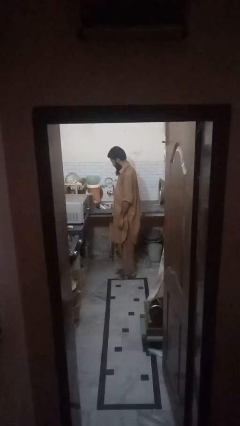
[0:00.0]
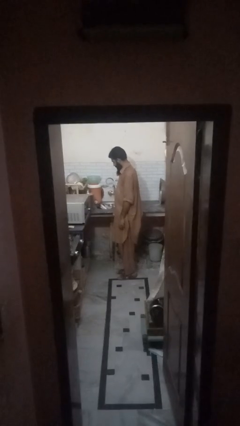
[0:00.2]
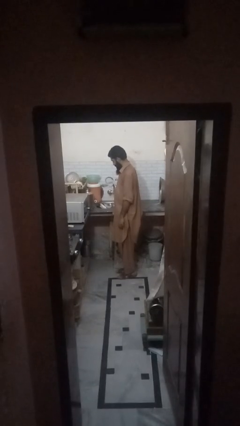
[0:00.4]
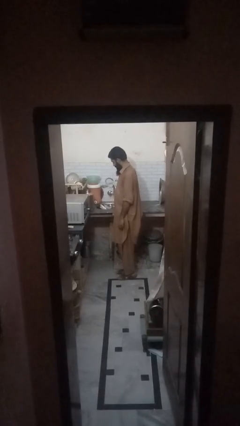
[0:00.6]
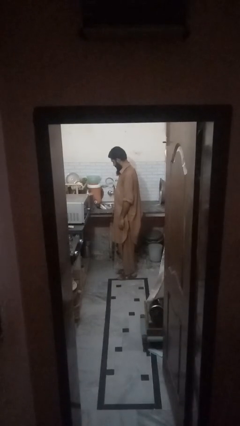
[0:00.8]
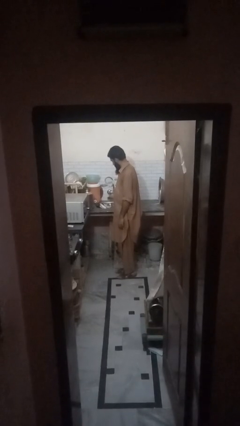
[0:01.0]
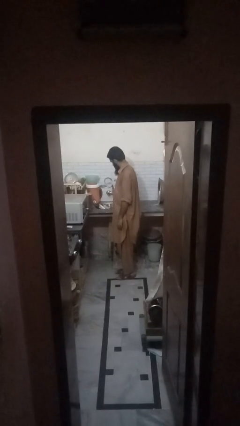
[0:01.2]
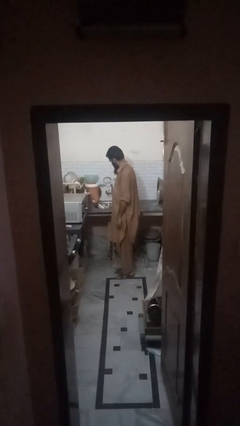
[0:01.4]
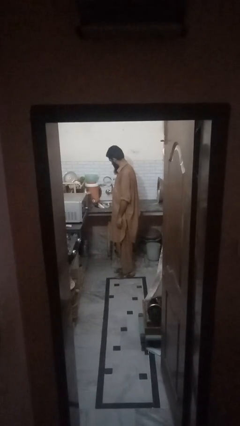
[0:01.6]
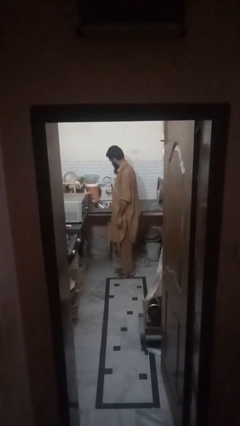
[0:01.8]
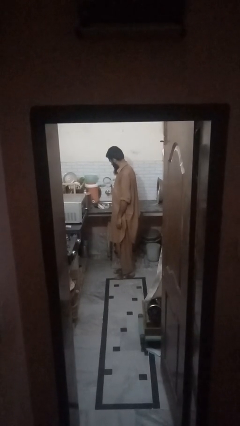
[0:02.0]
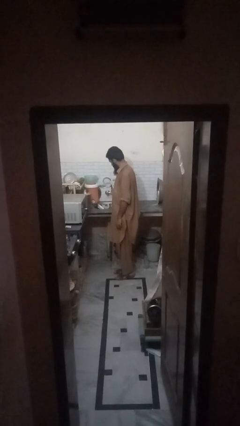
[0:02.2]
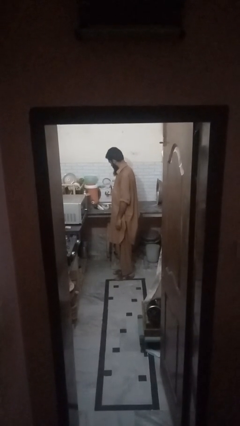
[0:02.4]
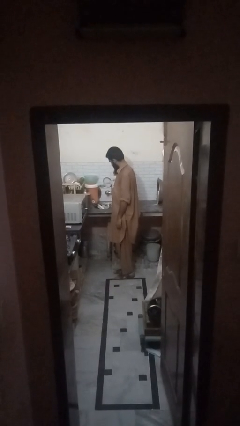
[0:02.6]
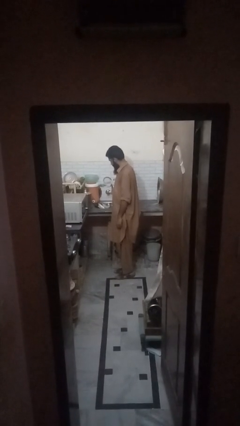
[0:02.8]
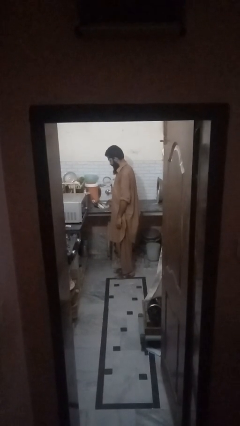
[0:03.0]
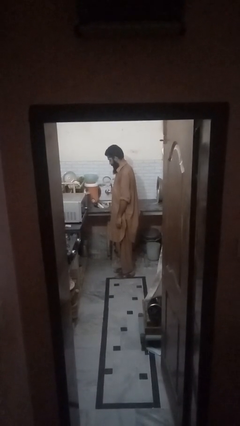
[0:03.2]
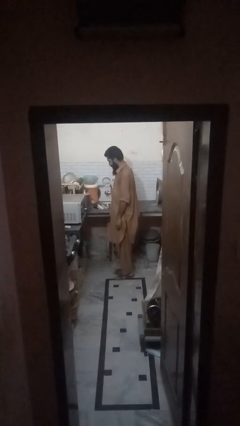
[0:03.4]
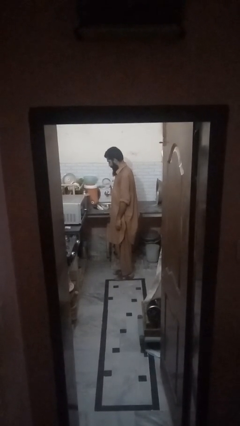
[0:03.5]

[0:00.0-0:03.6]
person closes dishwasher

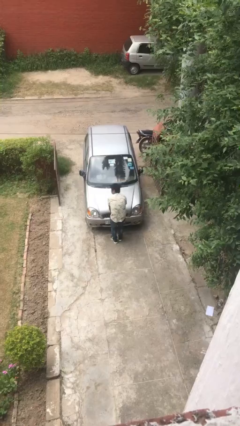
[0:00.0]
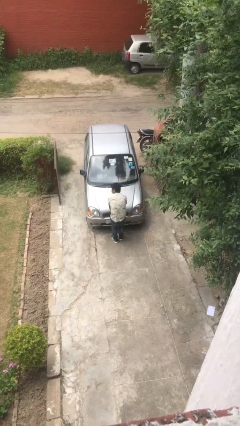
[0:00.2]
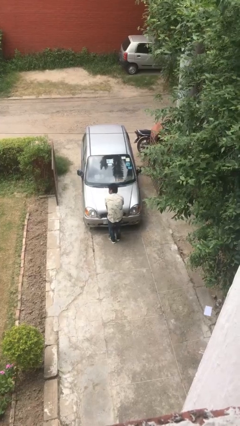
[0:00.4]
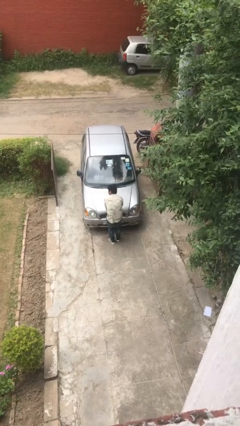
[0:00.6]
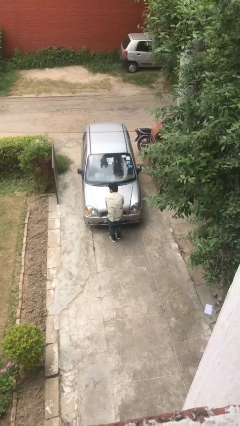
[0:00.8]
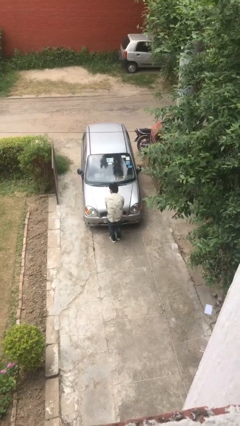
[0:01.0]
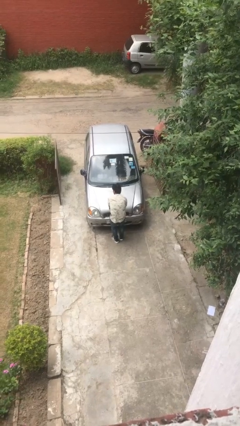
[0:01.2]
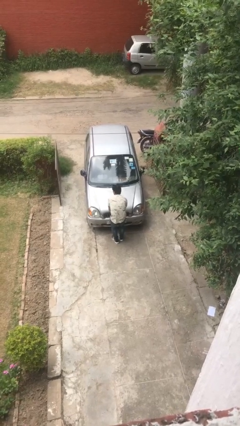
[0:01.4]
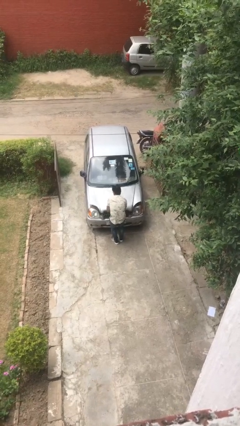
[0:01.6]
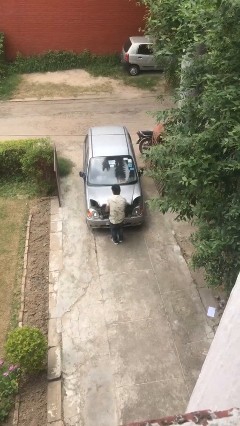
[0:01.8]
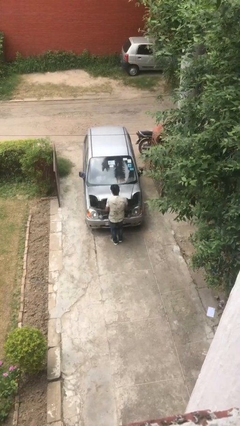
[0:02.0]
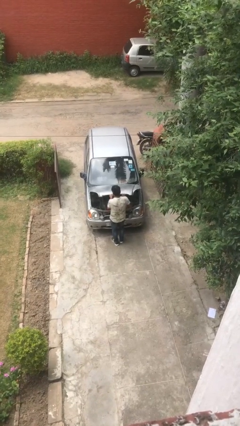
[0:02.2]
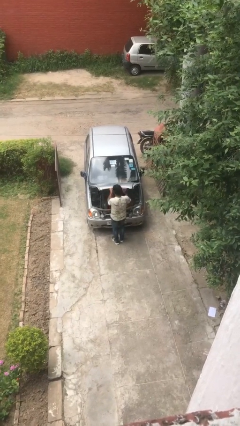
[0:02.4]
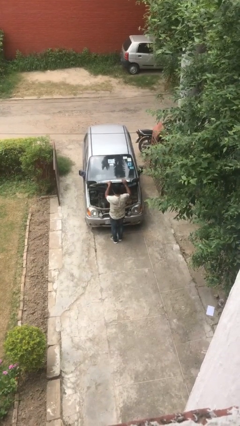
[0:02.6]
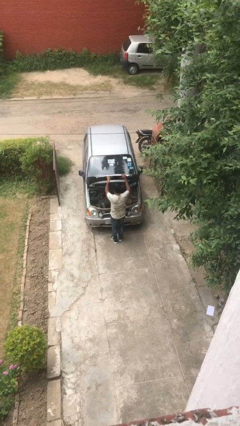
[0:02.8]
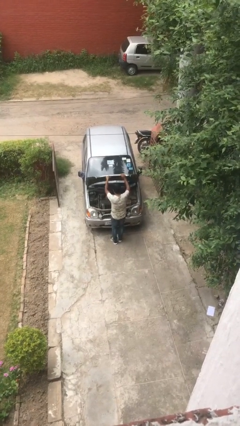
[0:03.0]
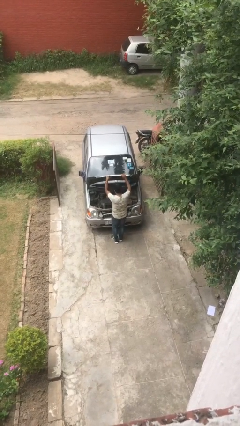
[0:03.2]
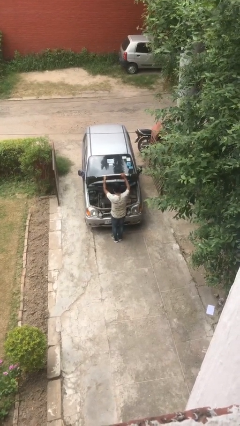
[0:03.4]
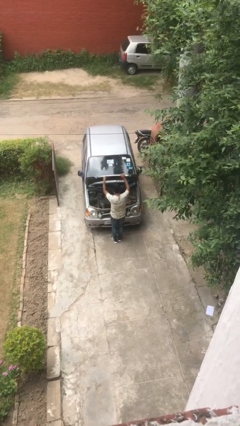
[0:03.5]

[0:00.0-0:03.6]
person opens car hood

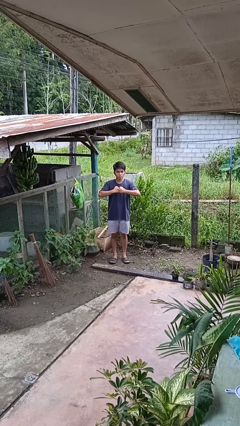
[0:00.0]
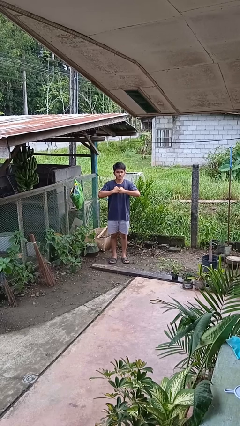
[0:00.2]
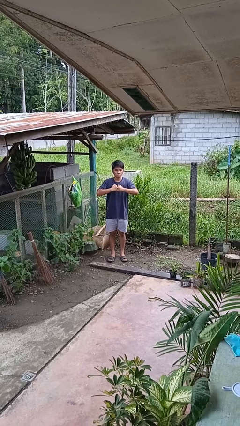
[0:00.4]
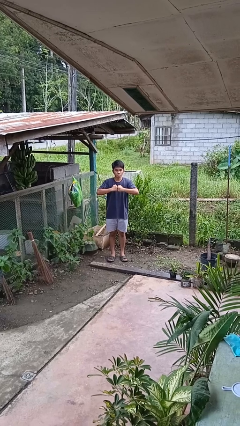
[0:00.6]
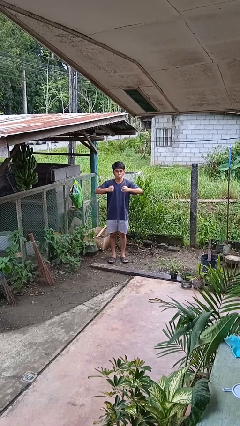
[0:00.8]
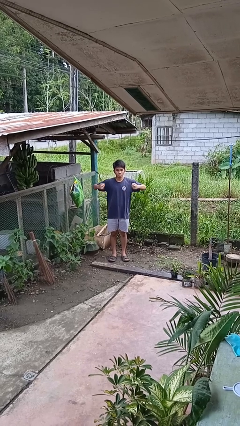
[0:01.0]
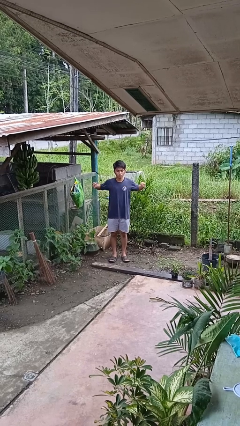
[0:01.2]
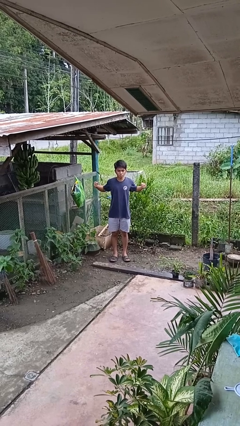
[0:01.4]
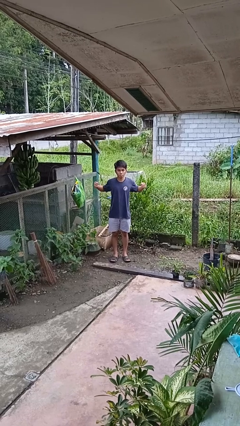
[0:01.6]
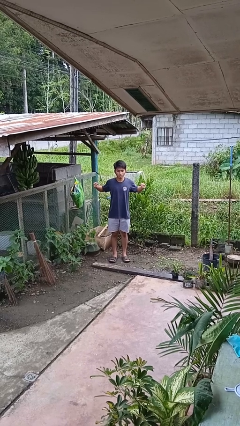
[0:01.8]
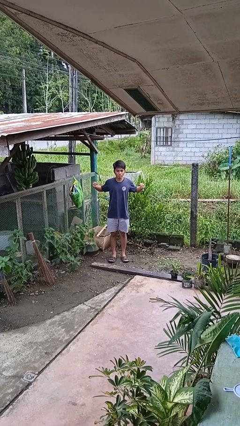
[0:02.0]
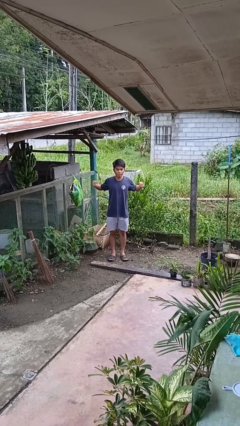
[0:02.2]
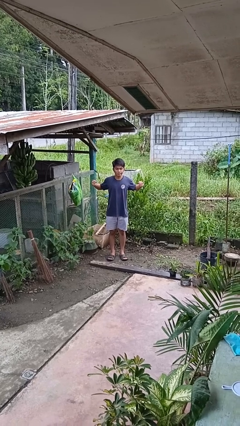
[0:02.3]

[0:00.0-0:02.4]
person gestures zoom in

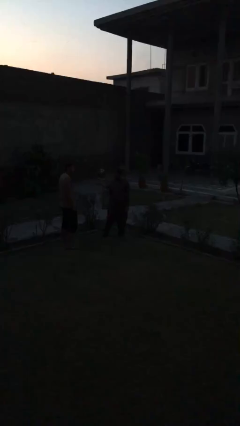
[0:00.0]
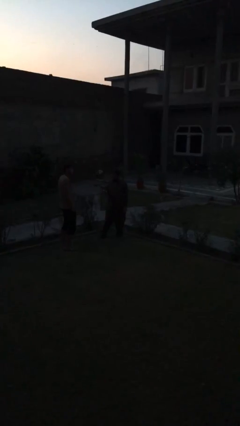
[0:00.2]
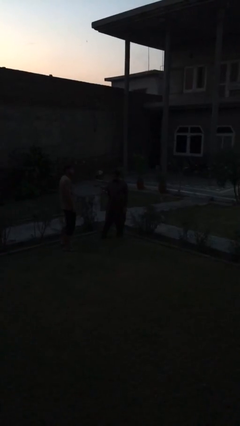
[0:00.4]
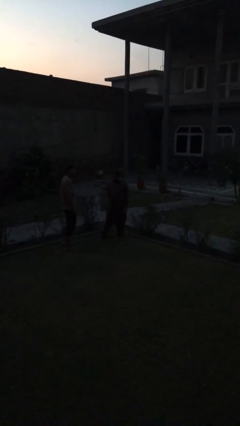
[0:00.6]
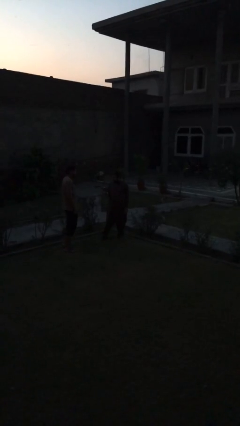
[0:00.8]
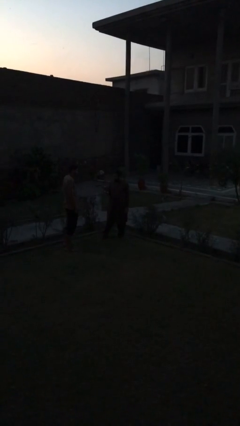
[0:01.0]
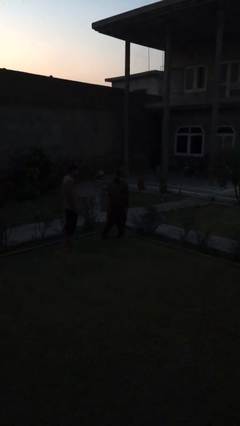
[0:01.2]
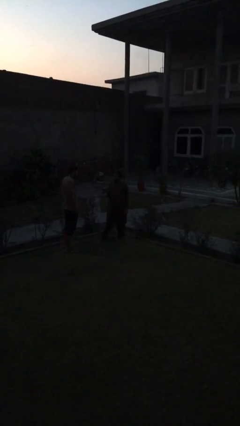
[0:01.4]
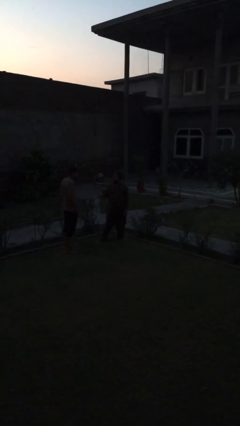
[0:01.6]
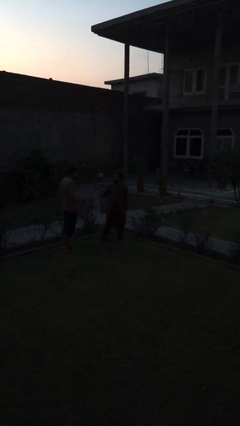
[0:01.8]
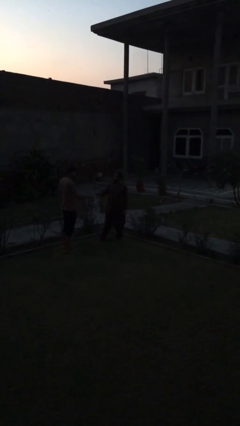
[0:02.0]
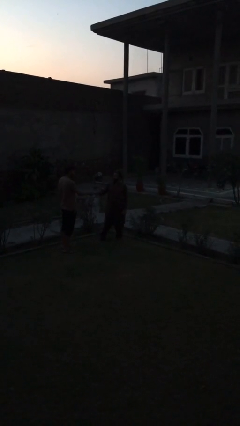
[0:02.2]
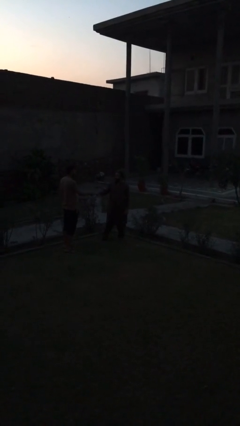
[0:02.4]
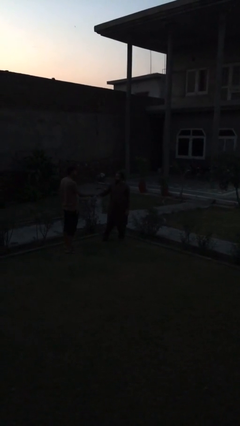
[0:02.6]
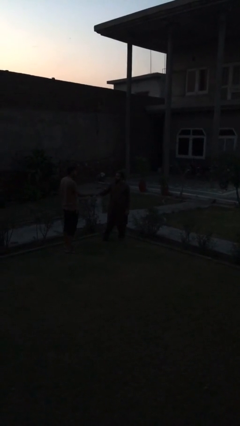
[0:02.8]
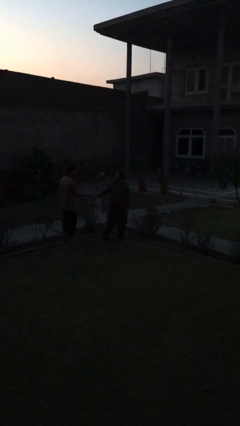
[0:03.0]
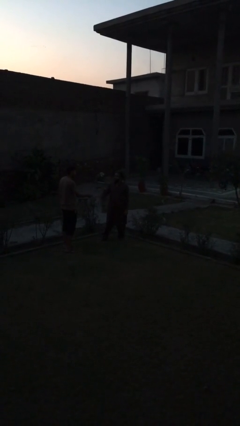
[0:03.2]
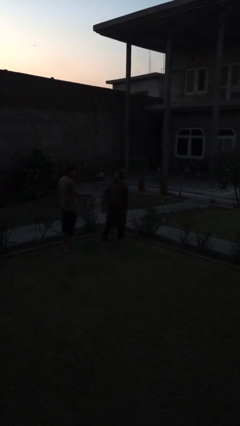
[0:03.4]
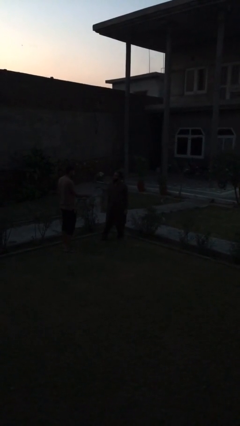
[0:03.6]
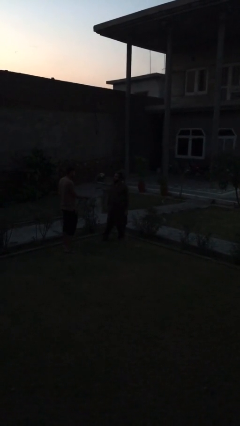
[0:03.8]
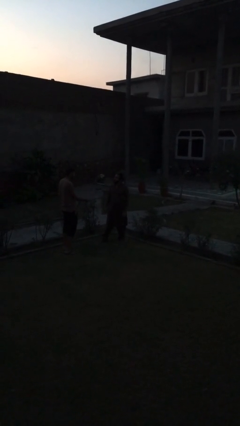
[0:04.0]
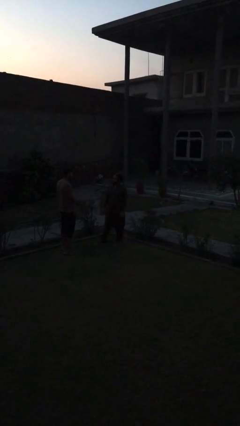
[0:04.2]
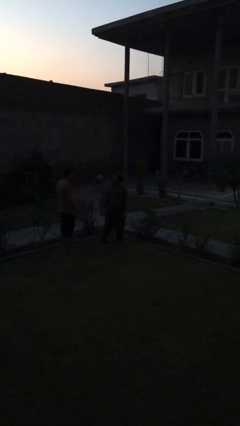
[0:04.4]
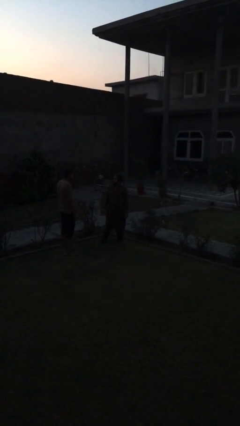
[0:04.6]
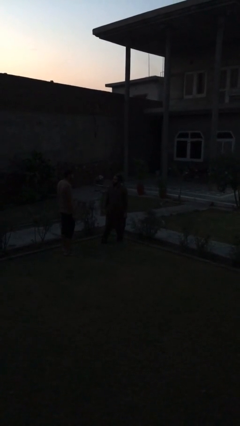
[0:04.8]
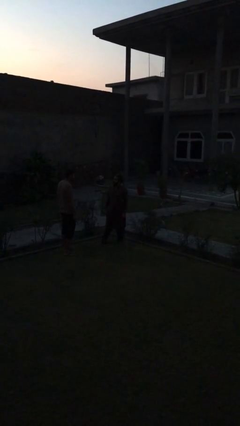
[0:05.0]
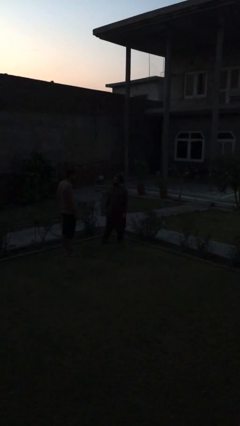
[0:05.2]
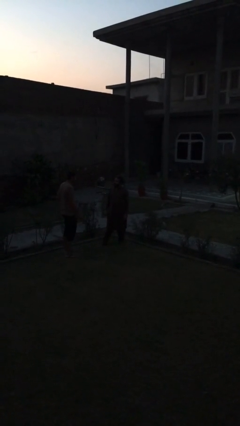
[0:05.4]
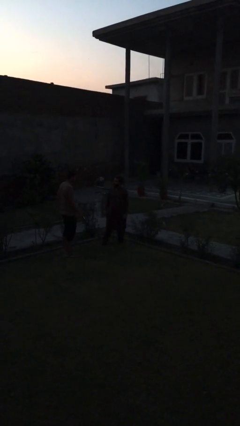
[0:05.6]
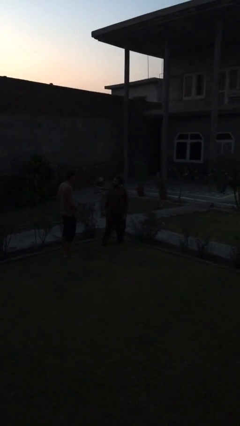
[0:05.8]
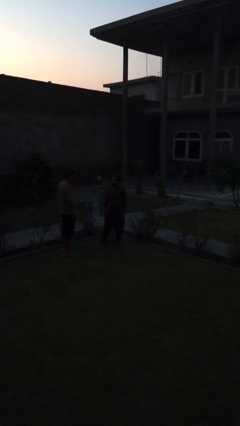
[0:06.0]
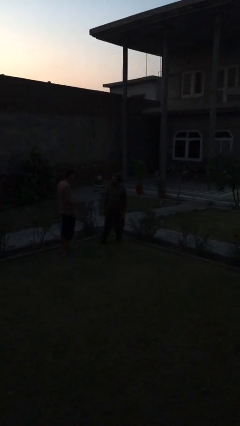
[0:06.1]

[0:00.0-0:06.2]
person transfers object to person

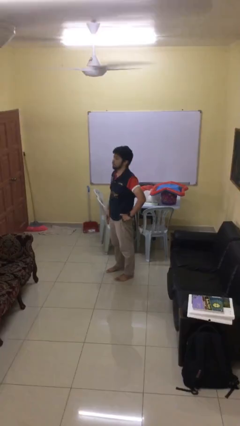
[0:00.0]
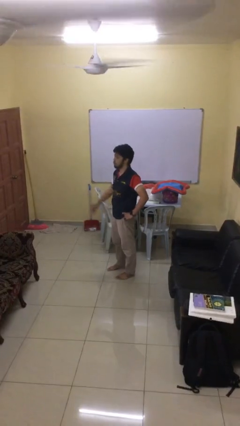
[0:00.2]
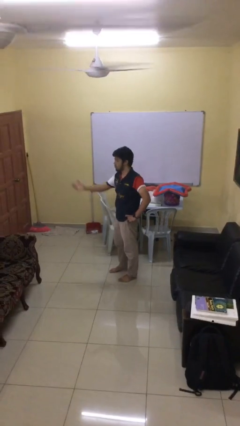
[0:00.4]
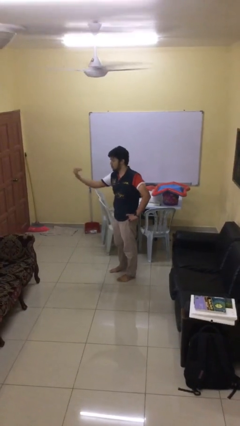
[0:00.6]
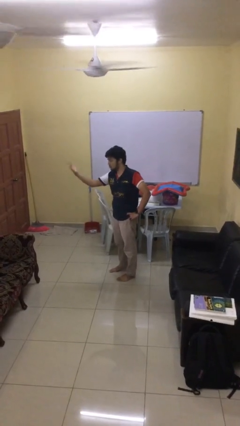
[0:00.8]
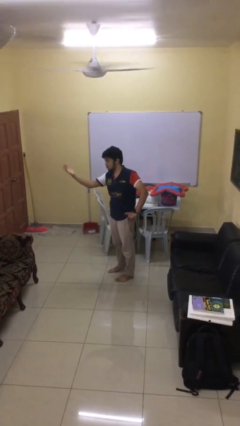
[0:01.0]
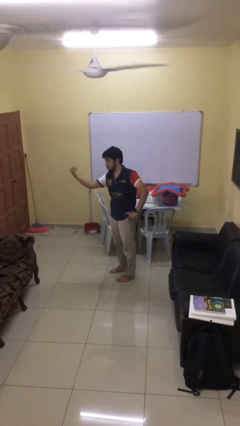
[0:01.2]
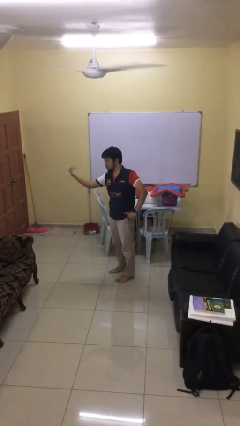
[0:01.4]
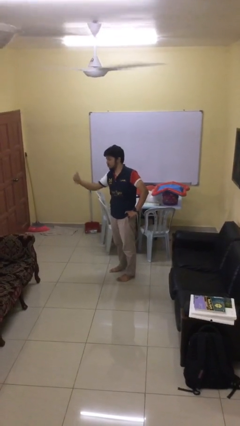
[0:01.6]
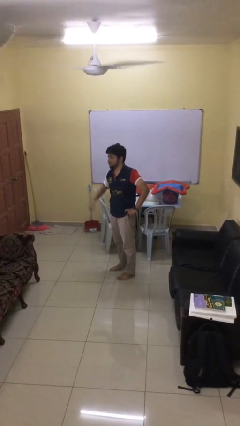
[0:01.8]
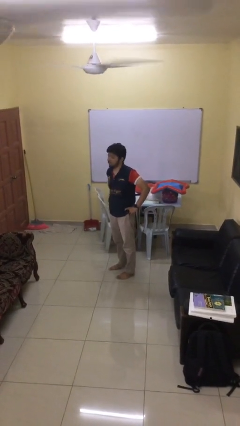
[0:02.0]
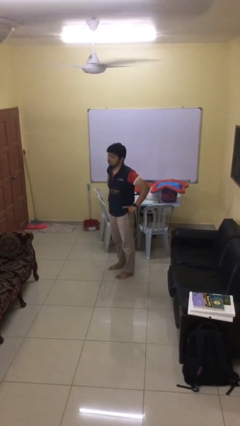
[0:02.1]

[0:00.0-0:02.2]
person gestures come here
